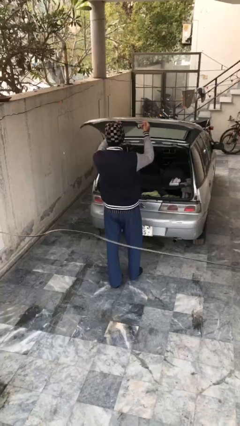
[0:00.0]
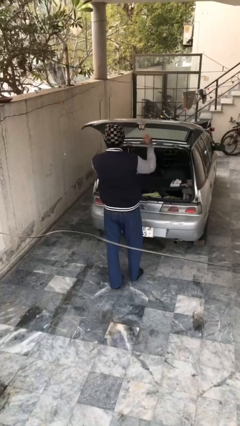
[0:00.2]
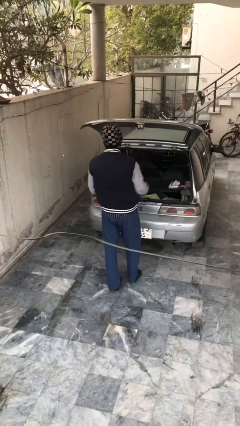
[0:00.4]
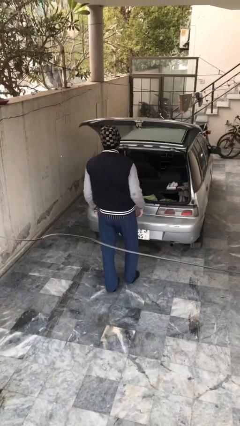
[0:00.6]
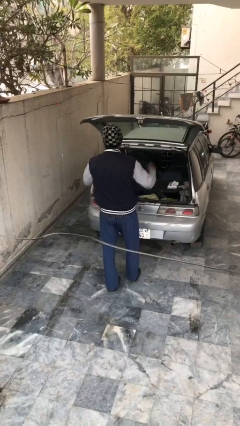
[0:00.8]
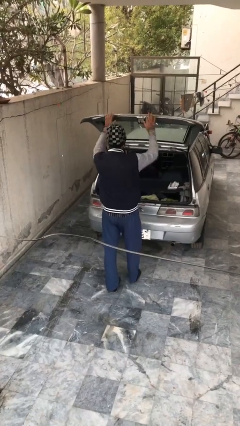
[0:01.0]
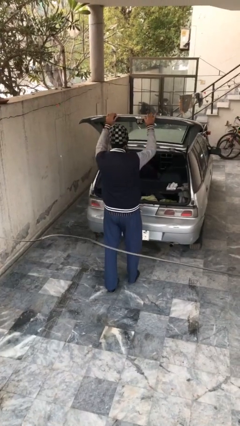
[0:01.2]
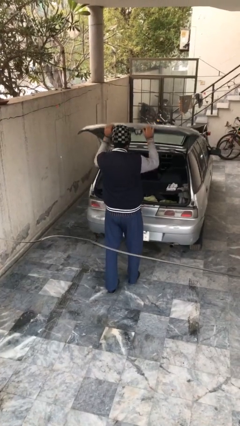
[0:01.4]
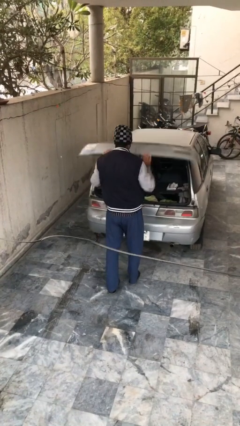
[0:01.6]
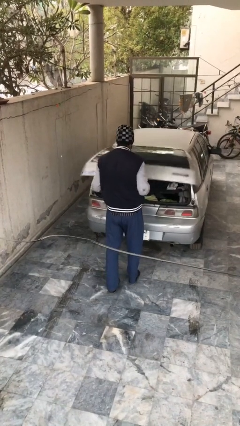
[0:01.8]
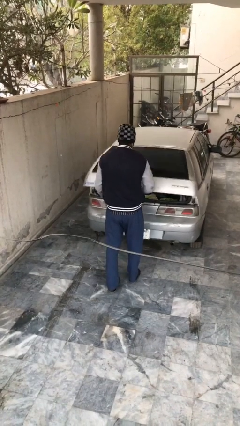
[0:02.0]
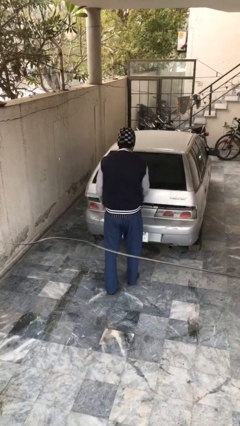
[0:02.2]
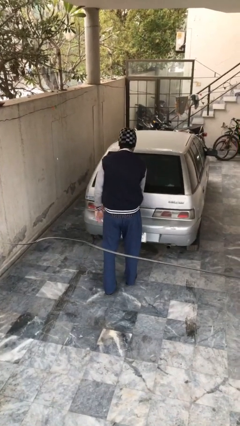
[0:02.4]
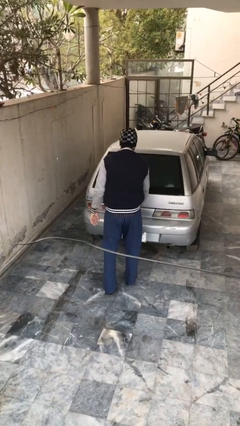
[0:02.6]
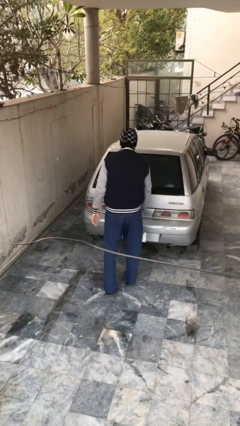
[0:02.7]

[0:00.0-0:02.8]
person closes car trunk

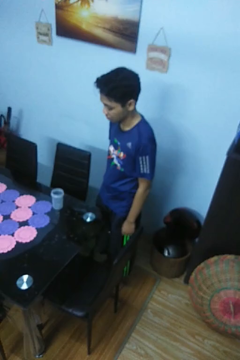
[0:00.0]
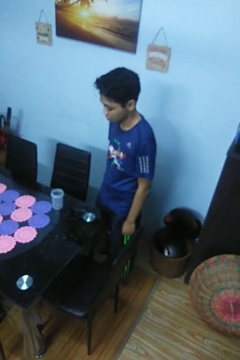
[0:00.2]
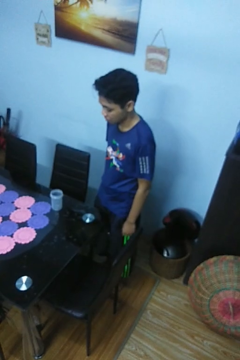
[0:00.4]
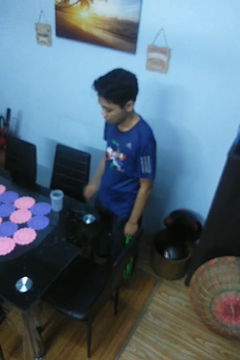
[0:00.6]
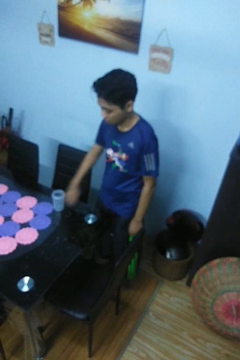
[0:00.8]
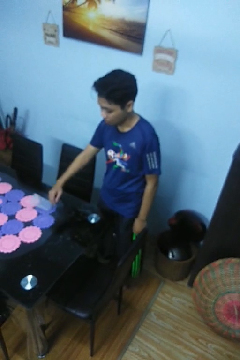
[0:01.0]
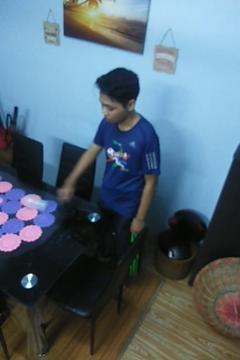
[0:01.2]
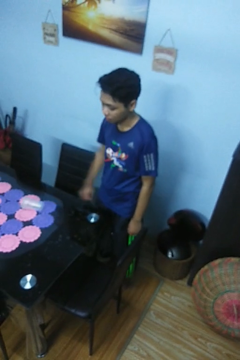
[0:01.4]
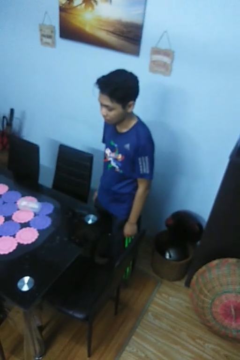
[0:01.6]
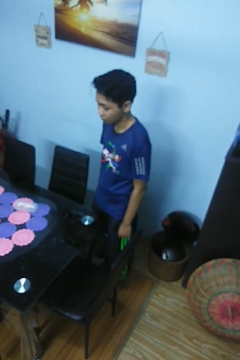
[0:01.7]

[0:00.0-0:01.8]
person knocks over glass

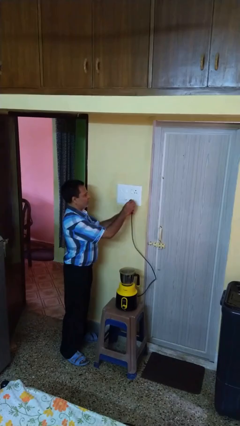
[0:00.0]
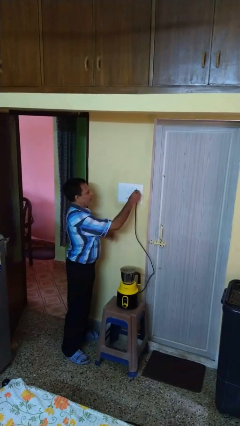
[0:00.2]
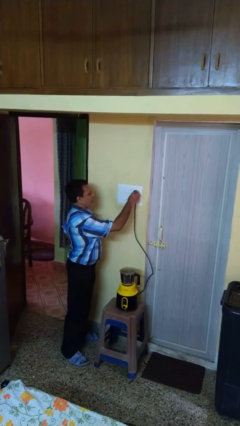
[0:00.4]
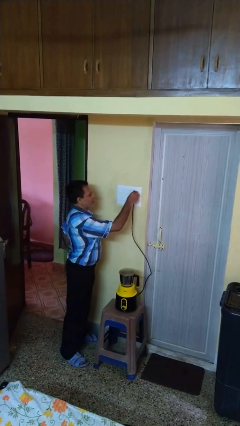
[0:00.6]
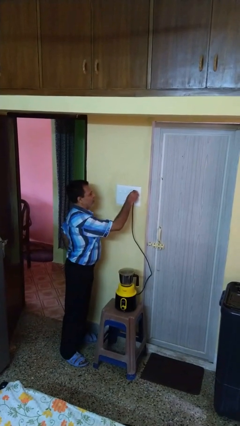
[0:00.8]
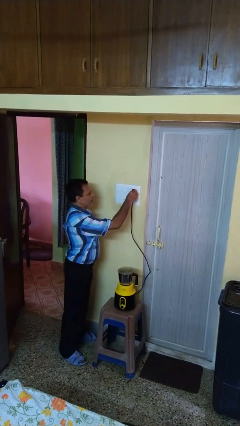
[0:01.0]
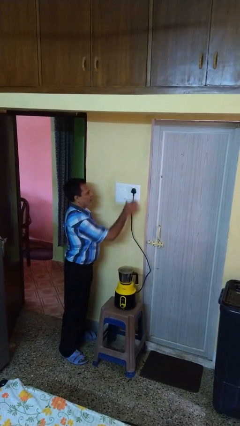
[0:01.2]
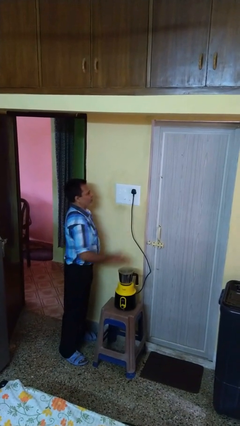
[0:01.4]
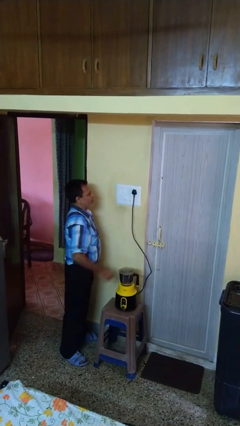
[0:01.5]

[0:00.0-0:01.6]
person plugs into electrical socket

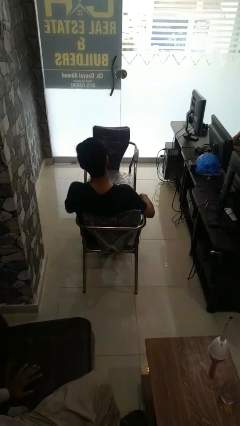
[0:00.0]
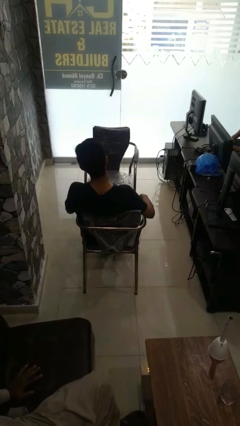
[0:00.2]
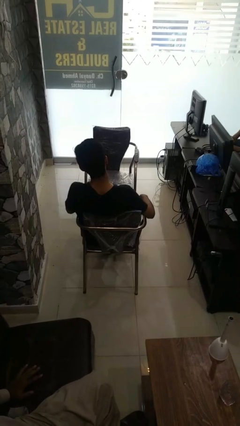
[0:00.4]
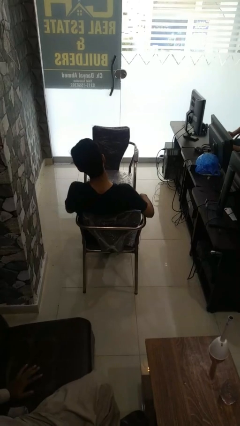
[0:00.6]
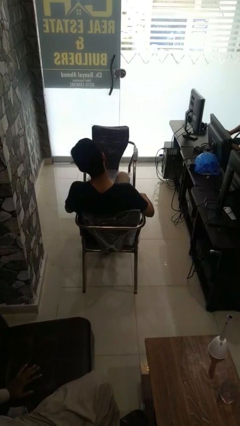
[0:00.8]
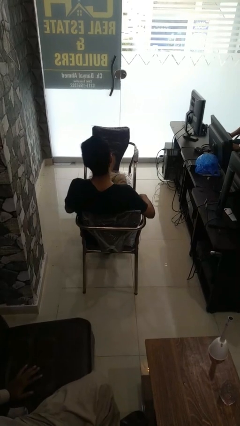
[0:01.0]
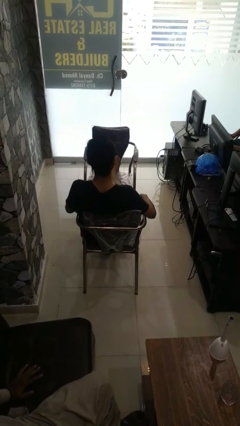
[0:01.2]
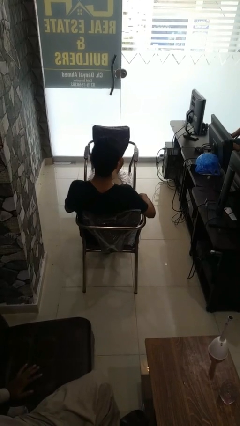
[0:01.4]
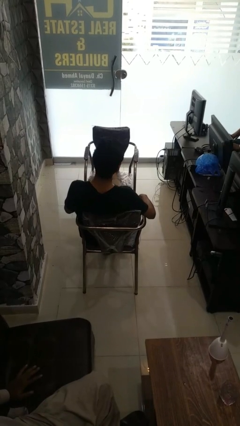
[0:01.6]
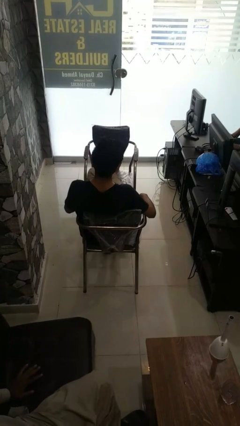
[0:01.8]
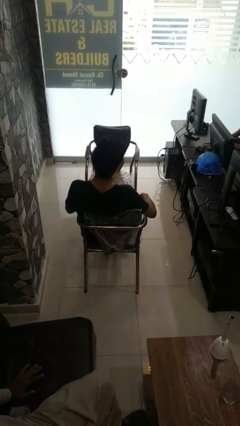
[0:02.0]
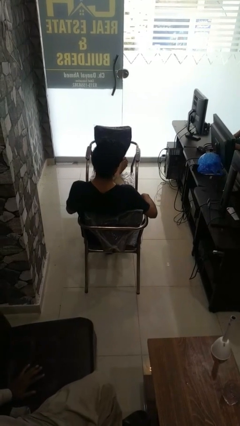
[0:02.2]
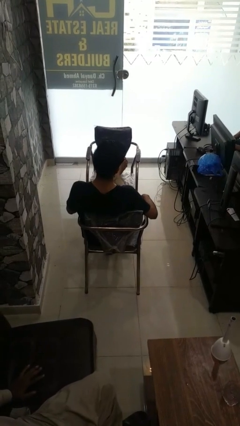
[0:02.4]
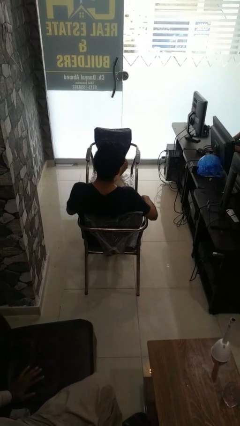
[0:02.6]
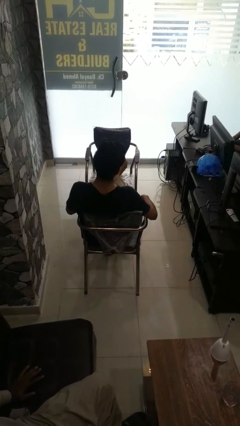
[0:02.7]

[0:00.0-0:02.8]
person puts feet up

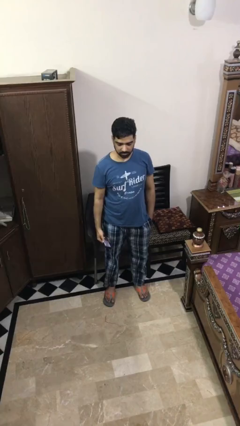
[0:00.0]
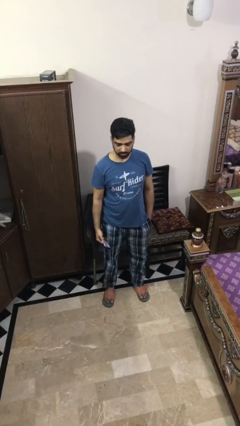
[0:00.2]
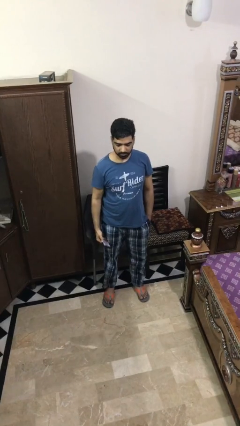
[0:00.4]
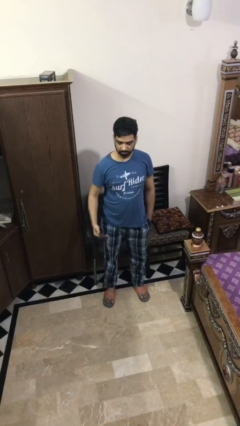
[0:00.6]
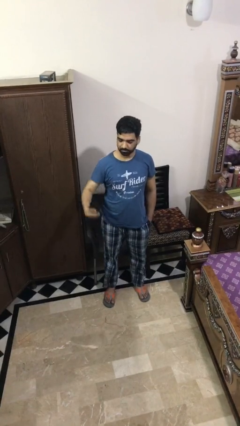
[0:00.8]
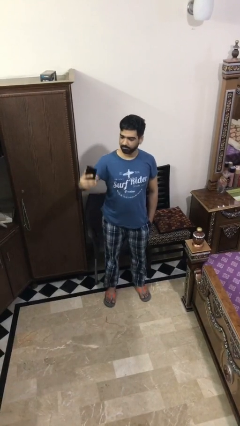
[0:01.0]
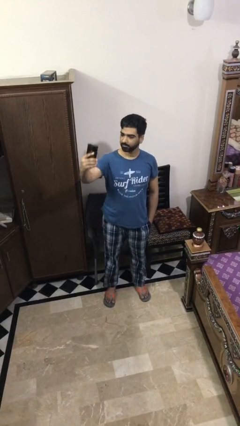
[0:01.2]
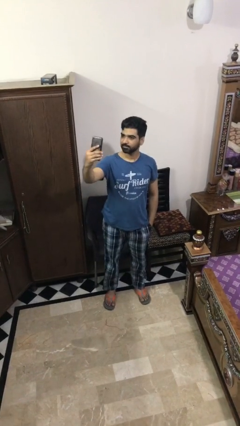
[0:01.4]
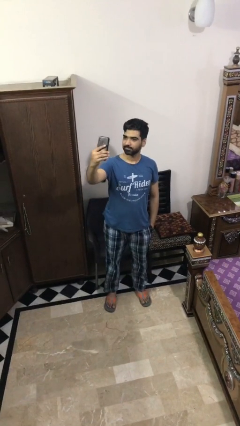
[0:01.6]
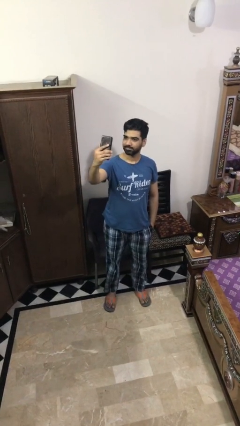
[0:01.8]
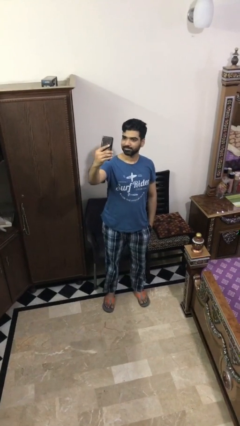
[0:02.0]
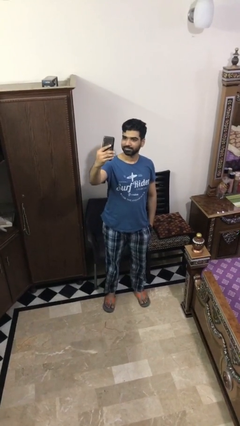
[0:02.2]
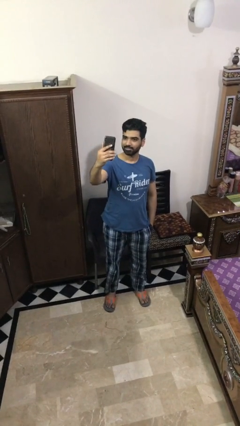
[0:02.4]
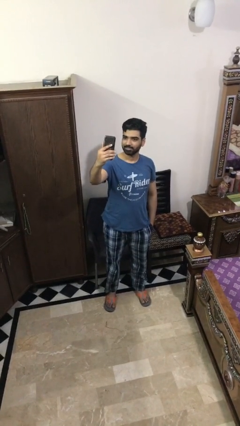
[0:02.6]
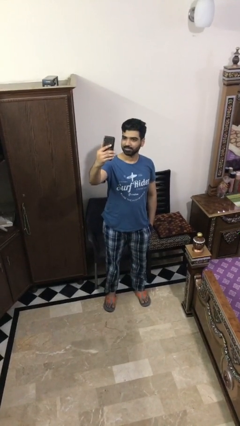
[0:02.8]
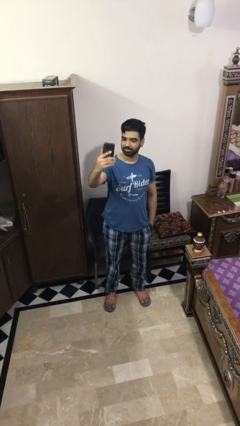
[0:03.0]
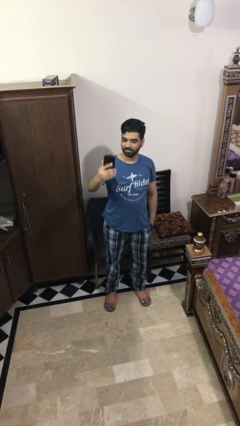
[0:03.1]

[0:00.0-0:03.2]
person takes selfie

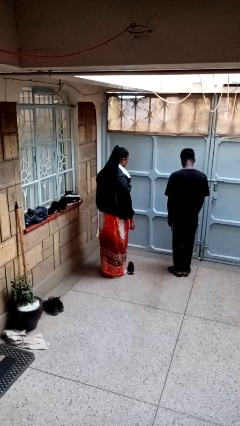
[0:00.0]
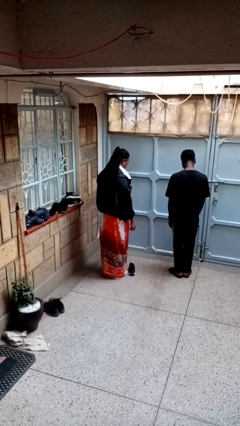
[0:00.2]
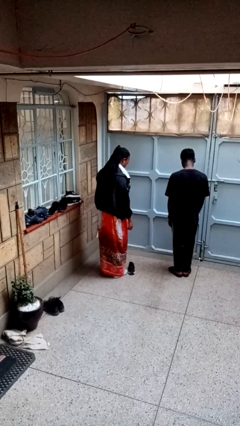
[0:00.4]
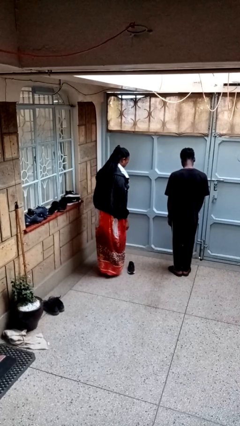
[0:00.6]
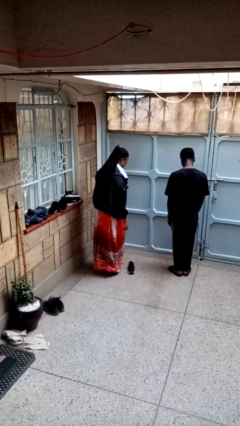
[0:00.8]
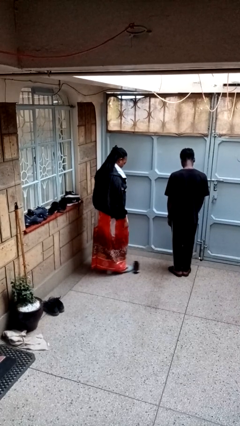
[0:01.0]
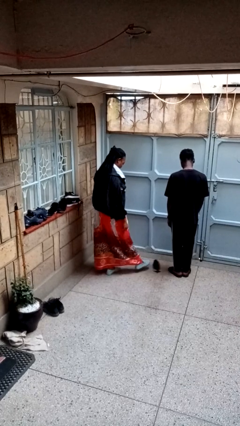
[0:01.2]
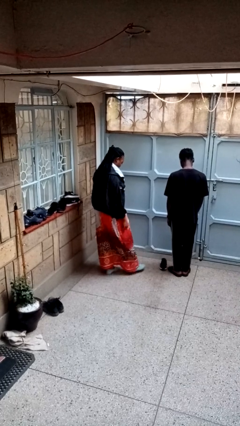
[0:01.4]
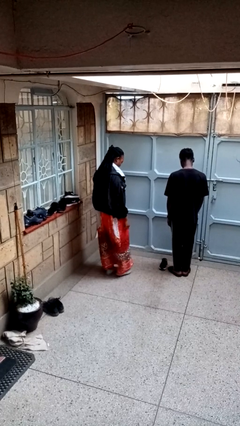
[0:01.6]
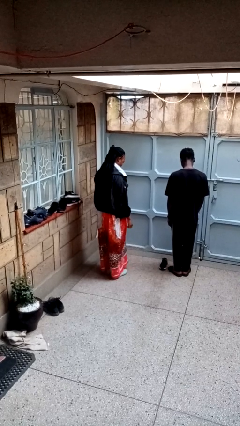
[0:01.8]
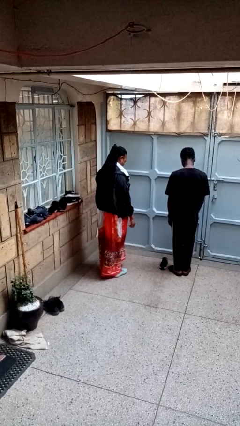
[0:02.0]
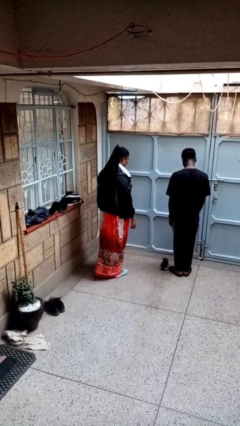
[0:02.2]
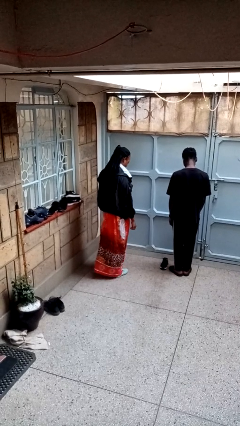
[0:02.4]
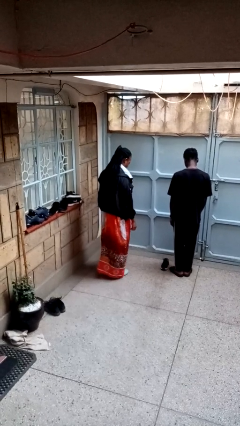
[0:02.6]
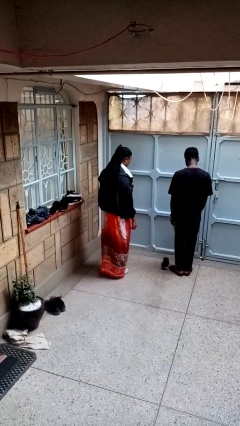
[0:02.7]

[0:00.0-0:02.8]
person kicks object to person

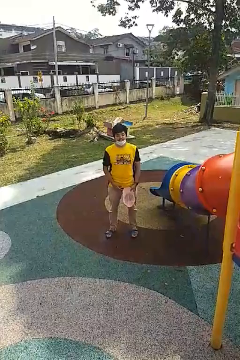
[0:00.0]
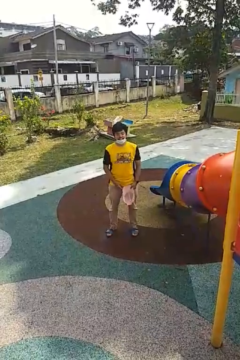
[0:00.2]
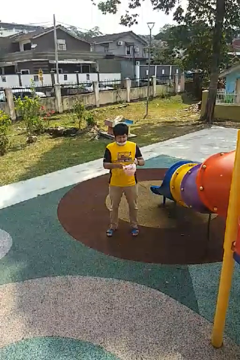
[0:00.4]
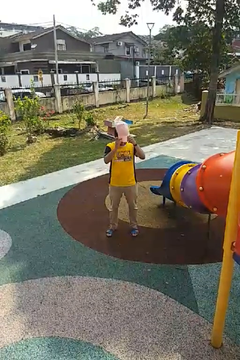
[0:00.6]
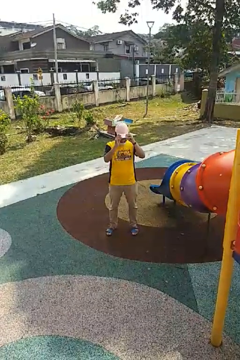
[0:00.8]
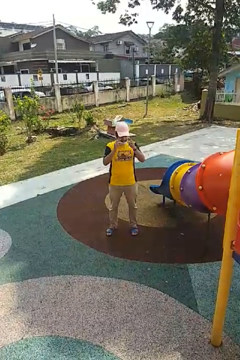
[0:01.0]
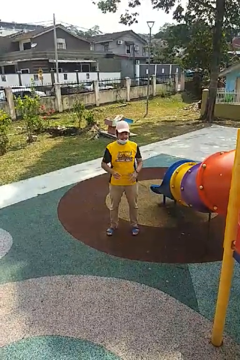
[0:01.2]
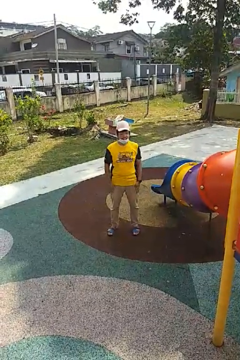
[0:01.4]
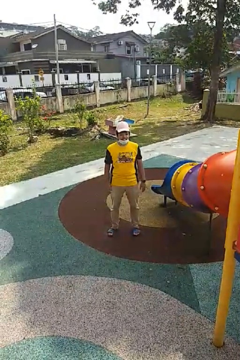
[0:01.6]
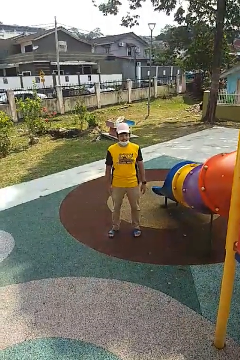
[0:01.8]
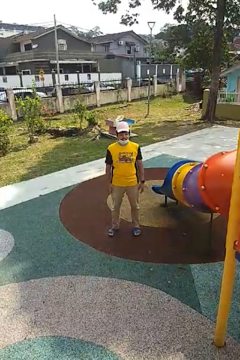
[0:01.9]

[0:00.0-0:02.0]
person puts on hat

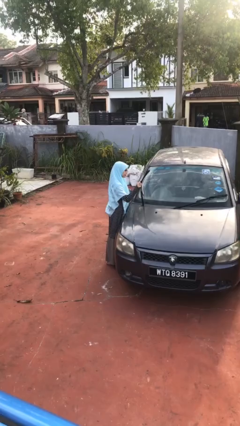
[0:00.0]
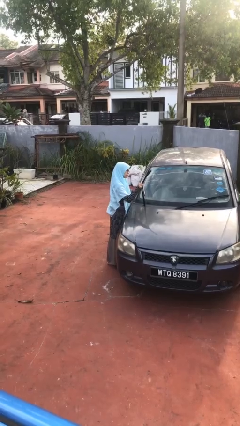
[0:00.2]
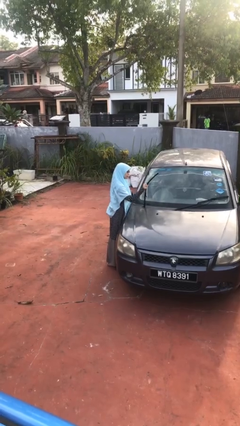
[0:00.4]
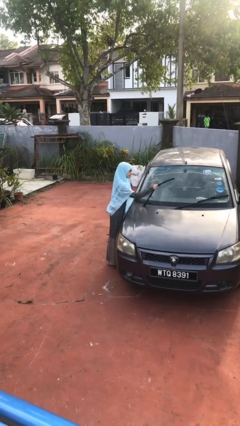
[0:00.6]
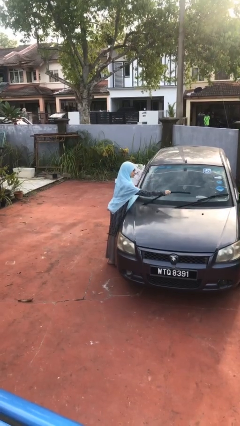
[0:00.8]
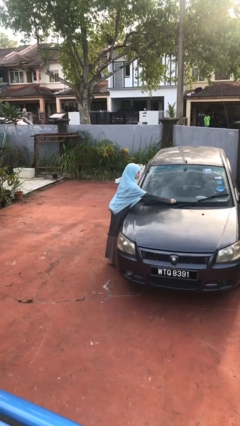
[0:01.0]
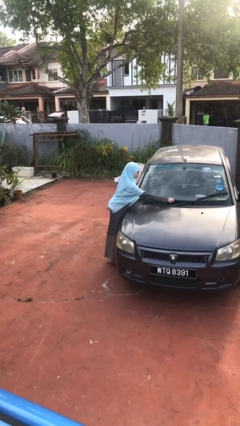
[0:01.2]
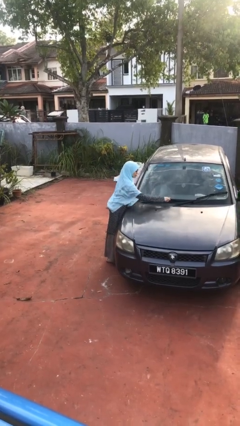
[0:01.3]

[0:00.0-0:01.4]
person flips down car wipers
